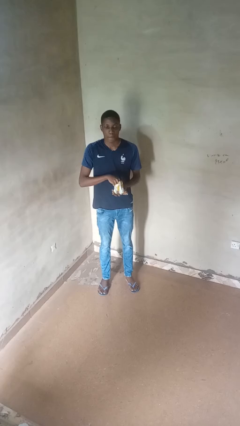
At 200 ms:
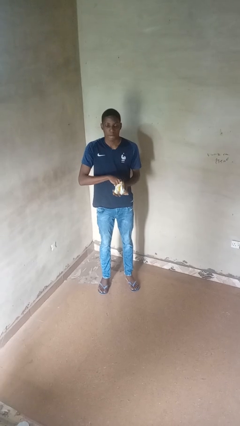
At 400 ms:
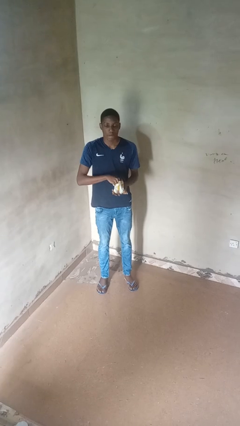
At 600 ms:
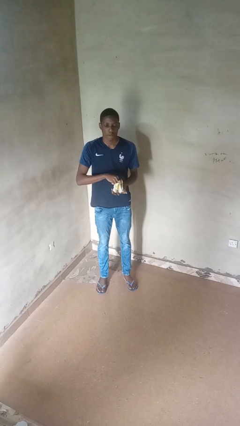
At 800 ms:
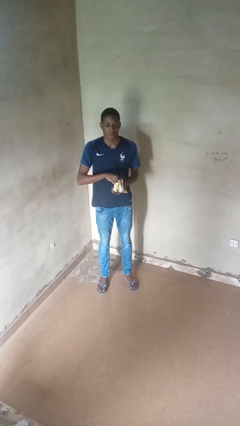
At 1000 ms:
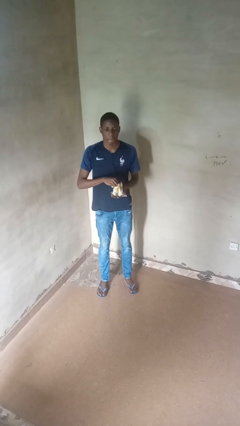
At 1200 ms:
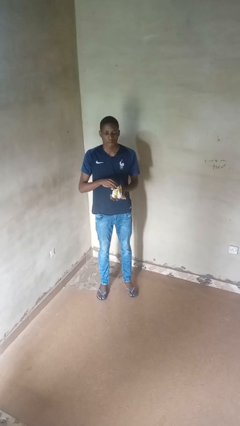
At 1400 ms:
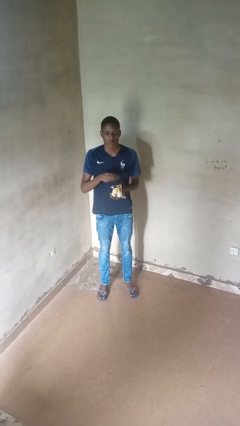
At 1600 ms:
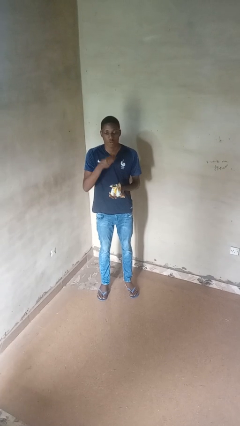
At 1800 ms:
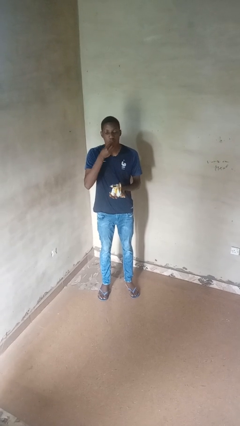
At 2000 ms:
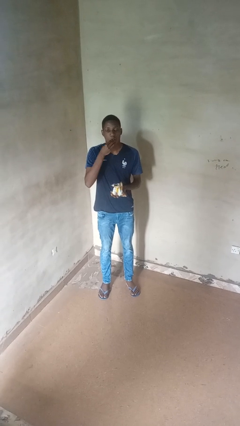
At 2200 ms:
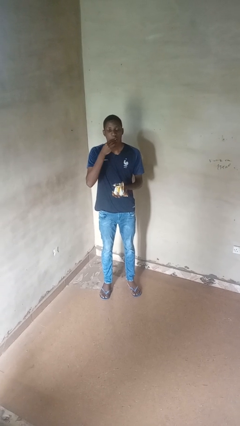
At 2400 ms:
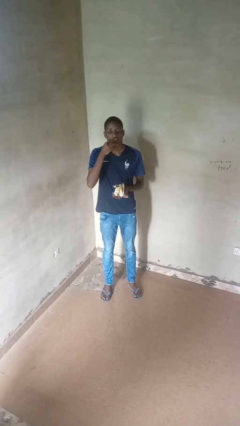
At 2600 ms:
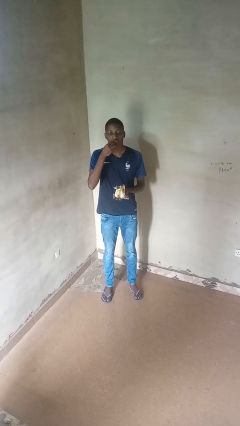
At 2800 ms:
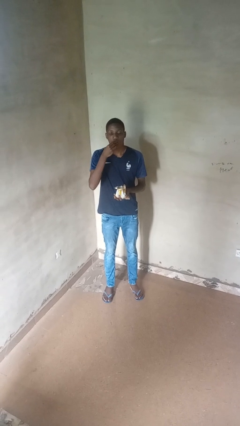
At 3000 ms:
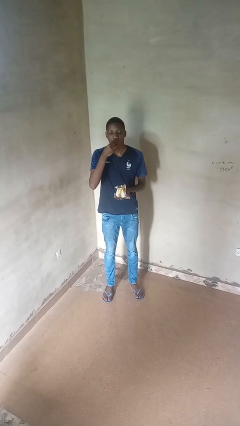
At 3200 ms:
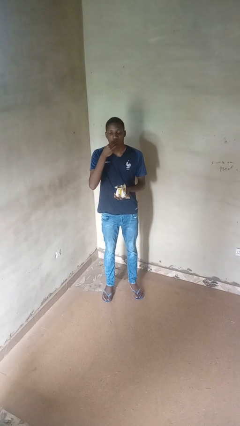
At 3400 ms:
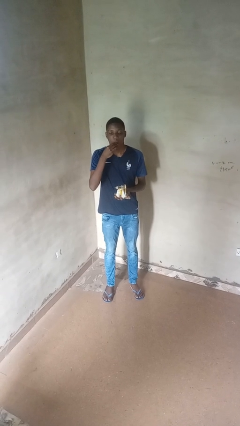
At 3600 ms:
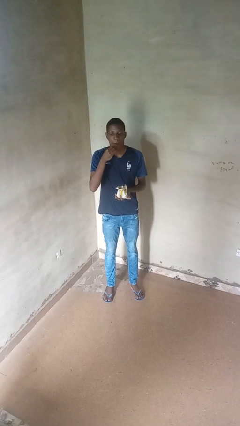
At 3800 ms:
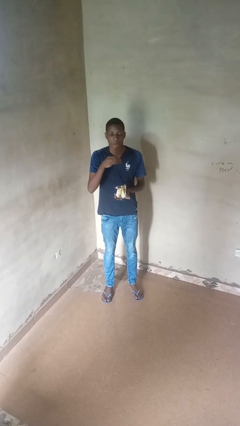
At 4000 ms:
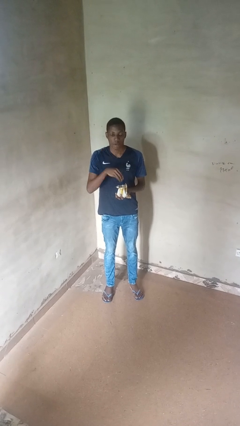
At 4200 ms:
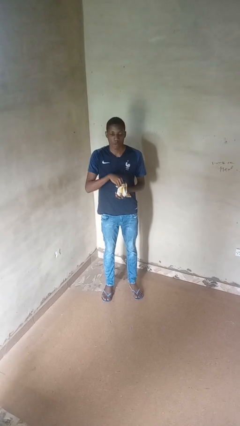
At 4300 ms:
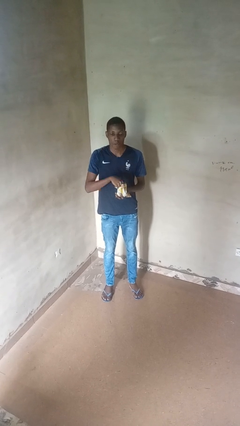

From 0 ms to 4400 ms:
person eats snack from bag

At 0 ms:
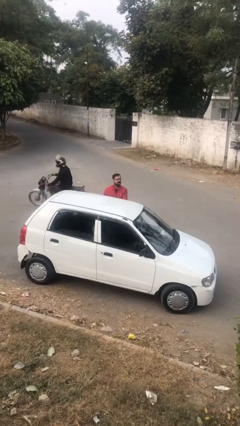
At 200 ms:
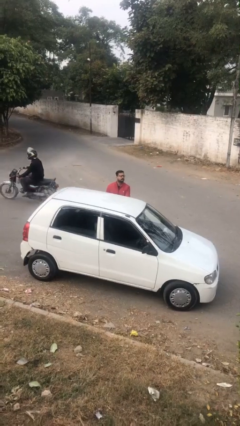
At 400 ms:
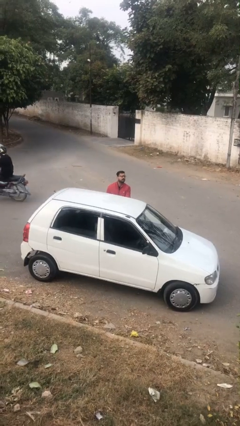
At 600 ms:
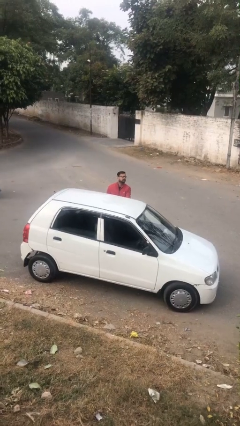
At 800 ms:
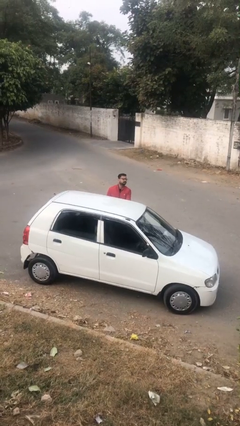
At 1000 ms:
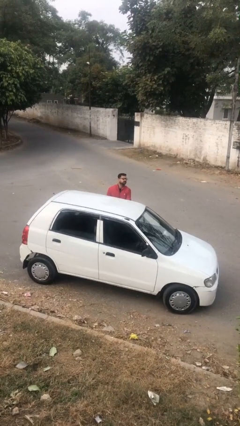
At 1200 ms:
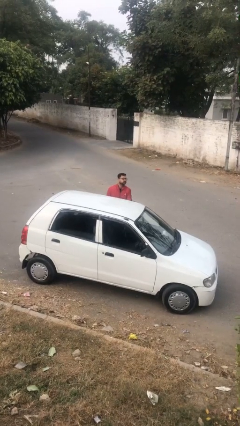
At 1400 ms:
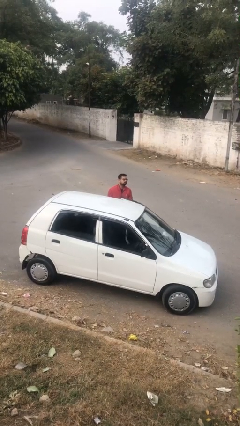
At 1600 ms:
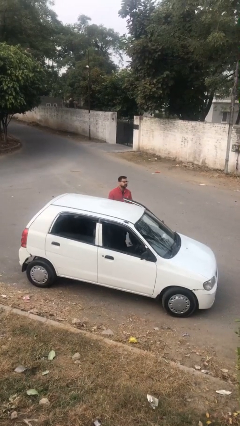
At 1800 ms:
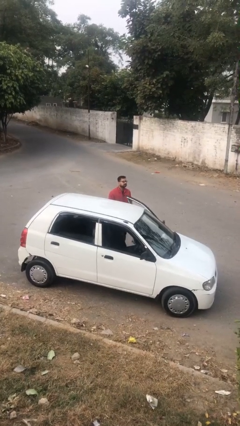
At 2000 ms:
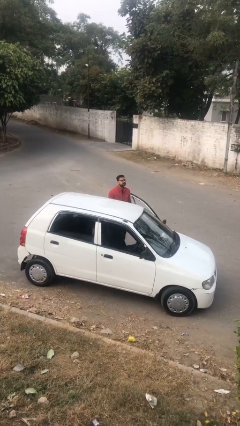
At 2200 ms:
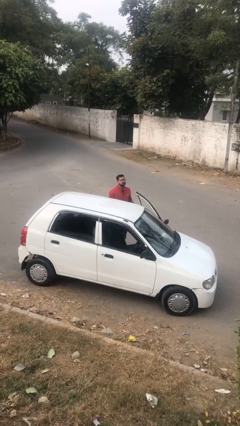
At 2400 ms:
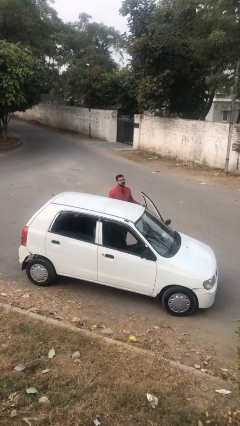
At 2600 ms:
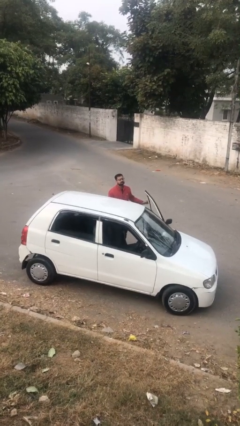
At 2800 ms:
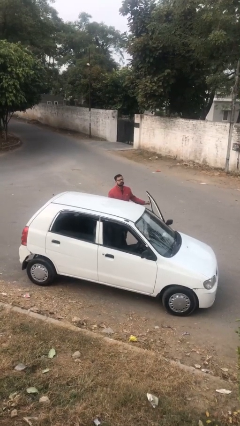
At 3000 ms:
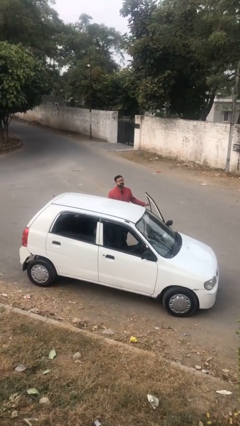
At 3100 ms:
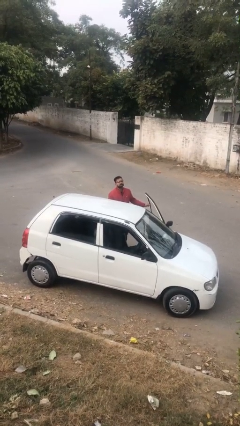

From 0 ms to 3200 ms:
person opens car door

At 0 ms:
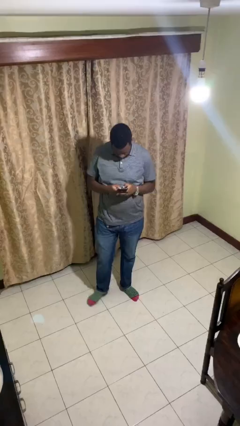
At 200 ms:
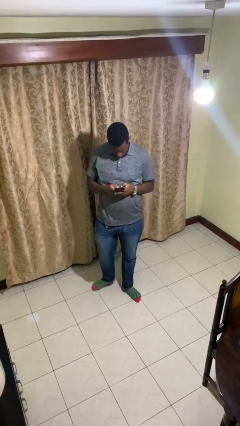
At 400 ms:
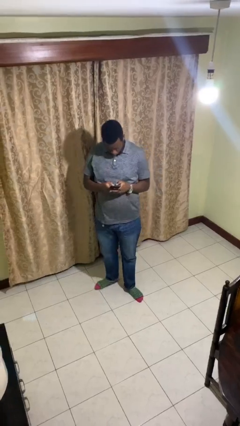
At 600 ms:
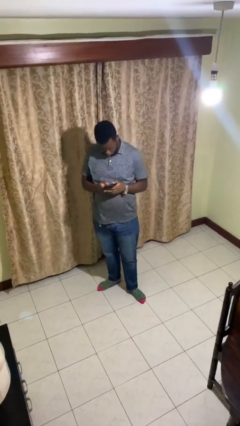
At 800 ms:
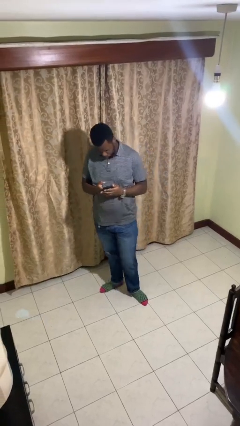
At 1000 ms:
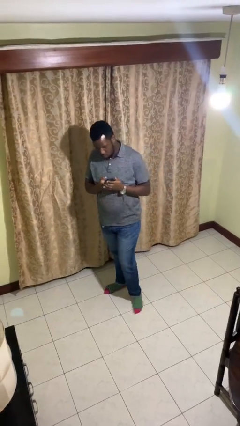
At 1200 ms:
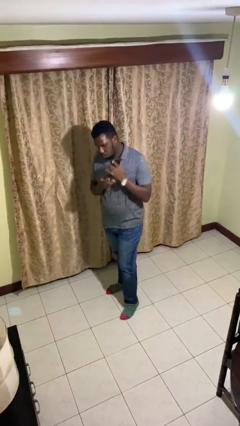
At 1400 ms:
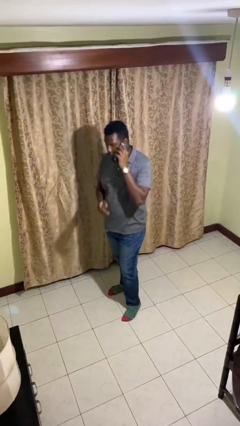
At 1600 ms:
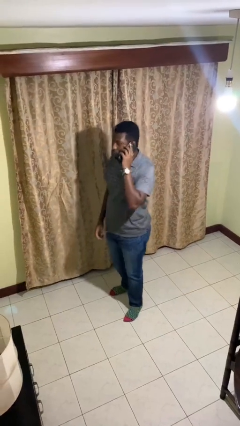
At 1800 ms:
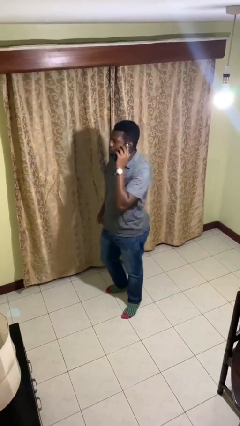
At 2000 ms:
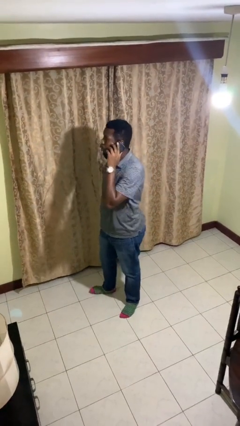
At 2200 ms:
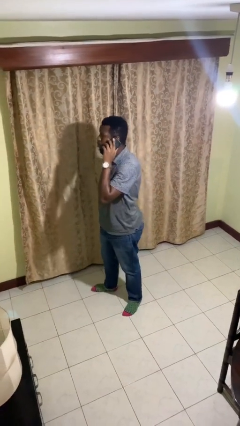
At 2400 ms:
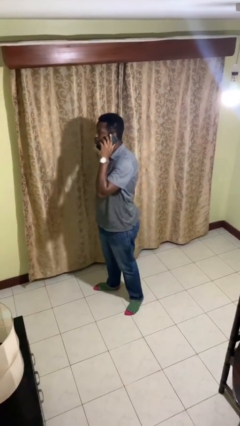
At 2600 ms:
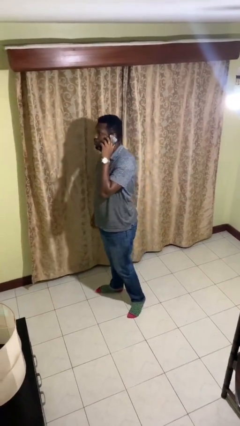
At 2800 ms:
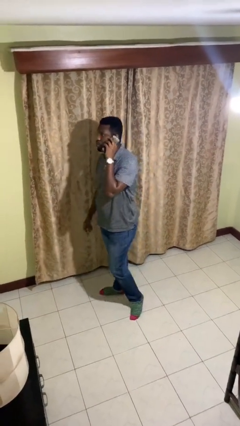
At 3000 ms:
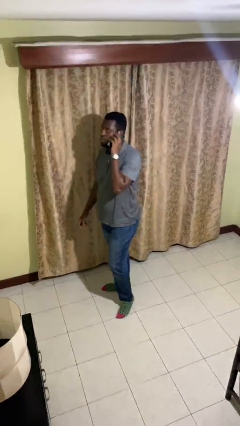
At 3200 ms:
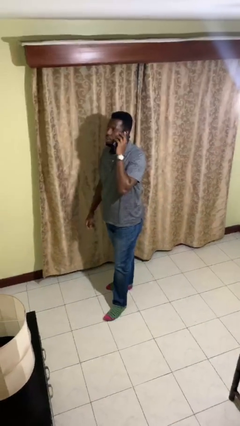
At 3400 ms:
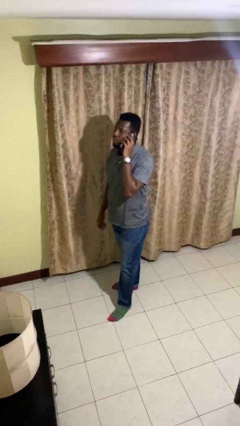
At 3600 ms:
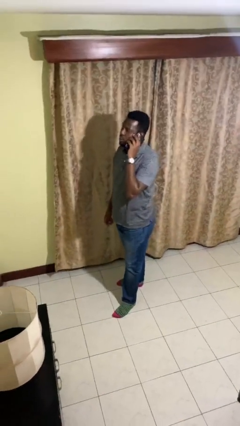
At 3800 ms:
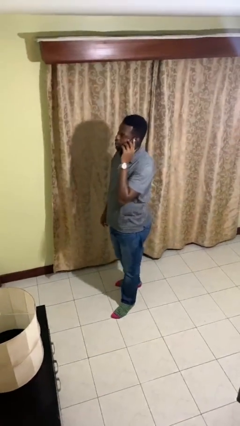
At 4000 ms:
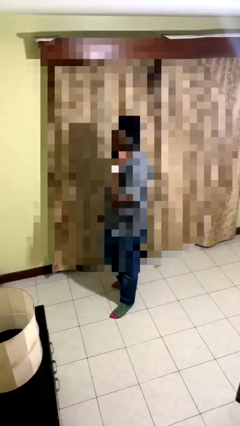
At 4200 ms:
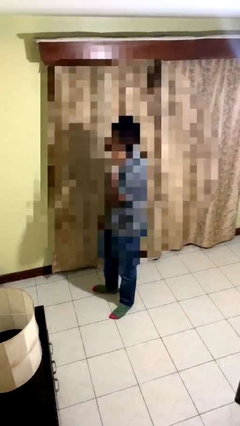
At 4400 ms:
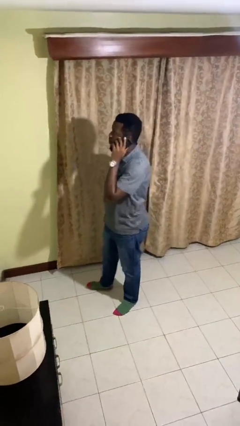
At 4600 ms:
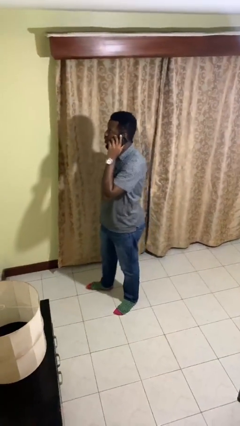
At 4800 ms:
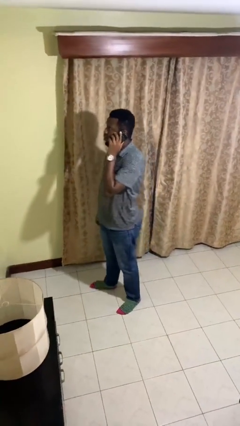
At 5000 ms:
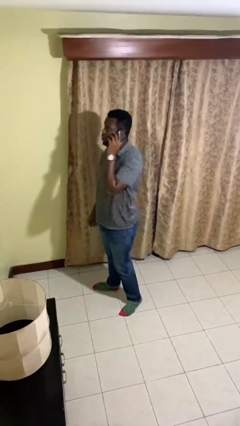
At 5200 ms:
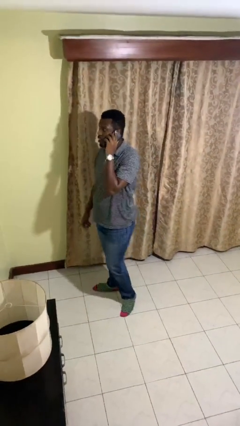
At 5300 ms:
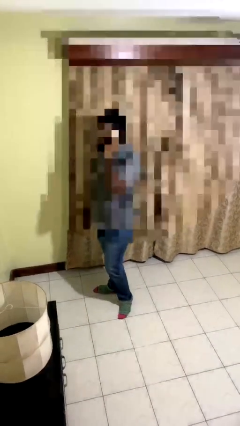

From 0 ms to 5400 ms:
person talks on phone

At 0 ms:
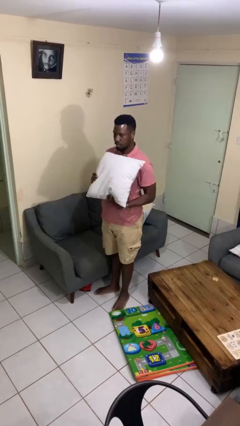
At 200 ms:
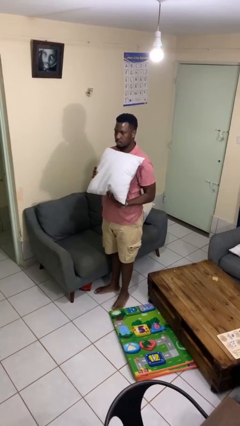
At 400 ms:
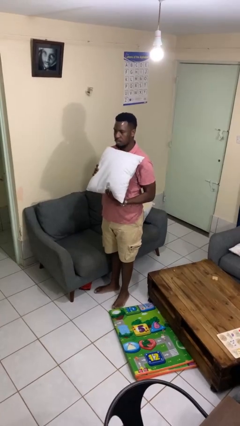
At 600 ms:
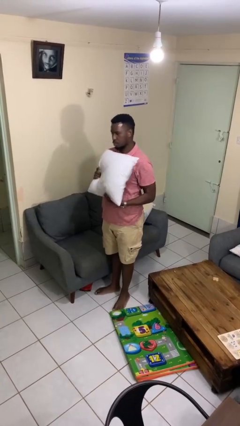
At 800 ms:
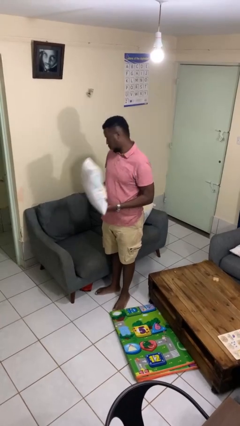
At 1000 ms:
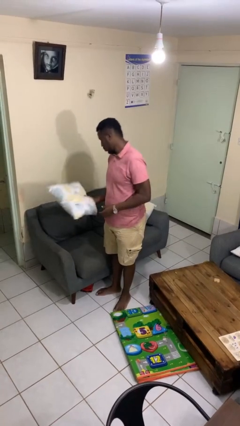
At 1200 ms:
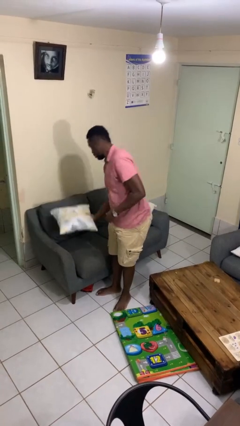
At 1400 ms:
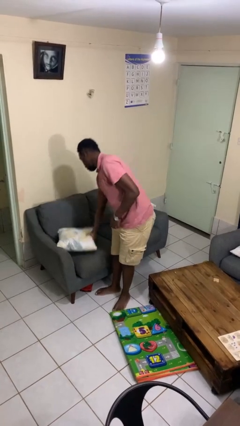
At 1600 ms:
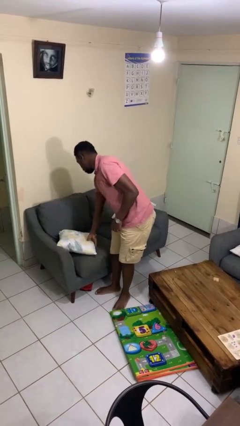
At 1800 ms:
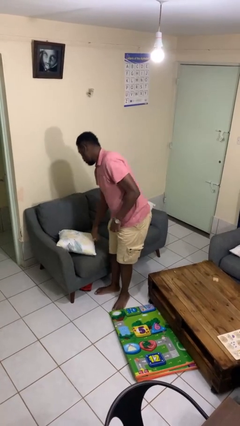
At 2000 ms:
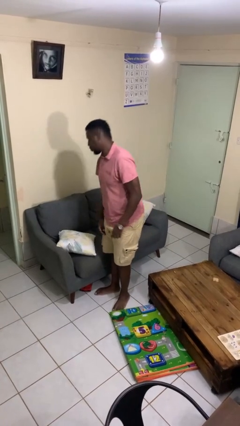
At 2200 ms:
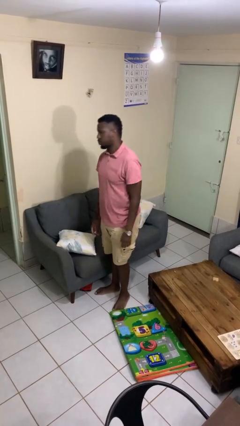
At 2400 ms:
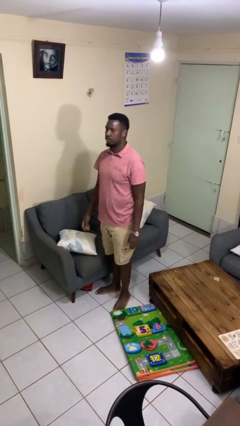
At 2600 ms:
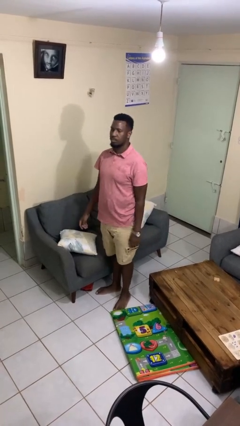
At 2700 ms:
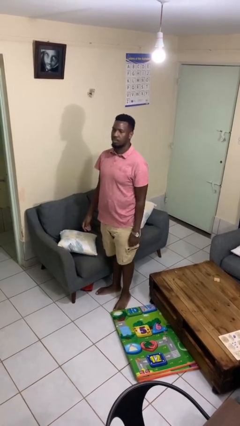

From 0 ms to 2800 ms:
person puts down object on couch

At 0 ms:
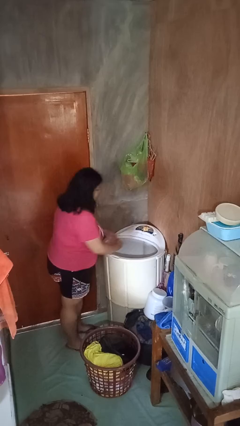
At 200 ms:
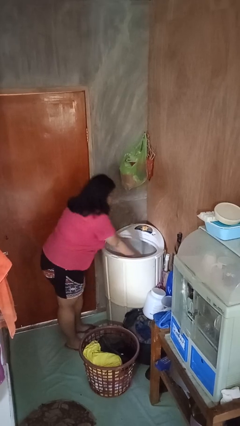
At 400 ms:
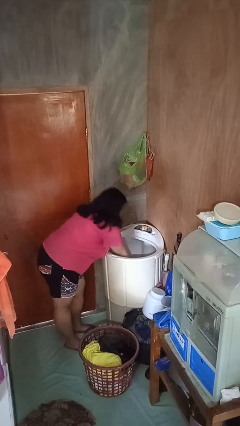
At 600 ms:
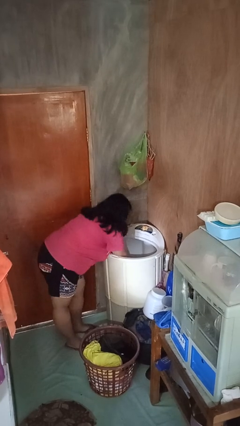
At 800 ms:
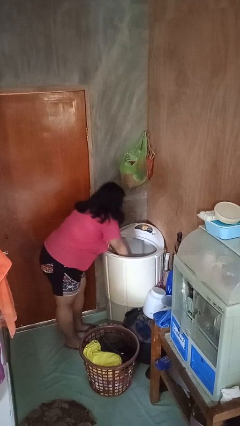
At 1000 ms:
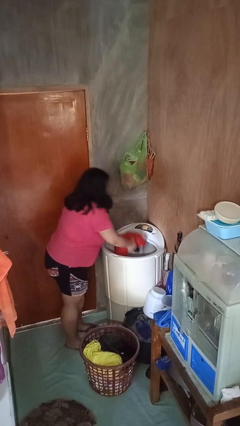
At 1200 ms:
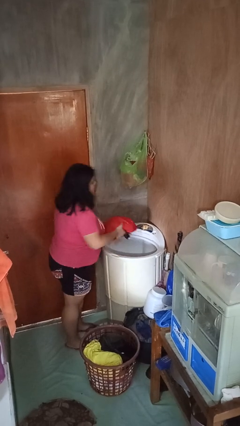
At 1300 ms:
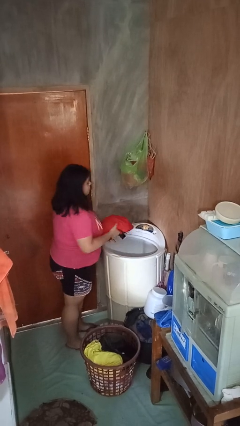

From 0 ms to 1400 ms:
person unloads dryer

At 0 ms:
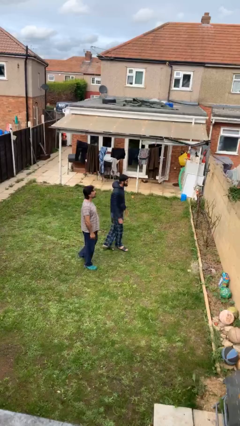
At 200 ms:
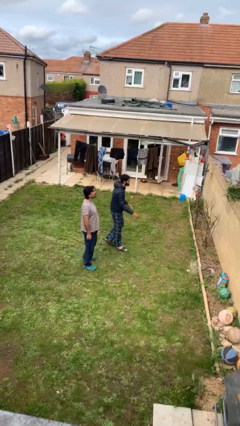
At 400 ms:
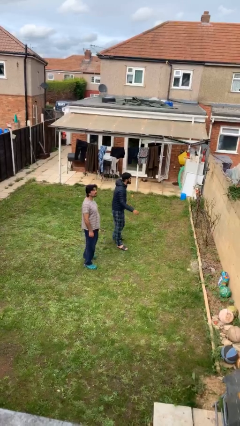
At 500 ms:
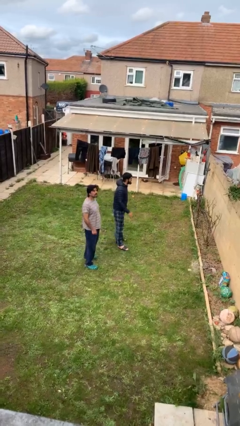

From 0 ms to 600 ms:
person talks to person
